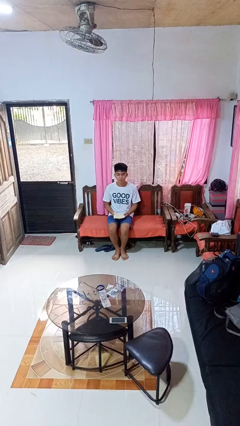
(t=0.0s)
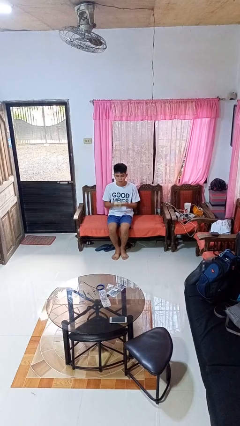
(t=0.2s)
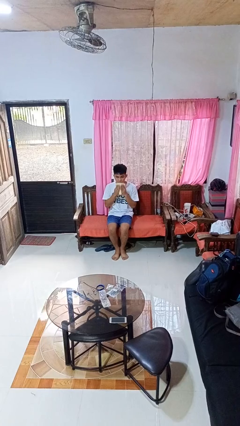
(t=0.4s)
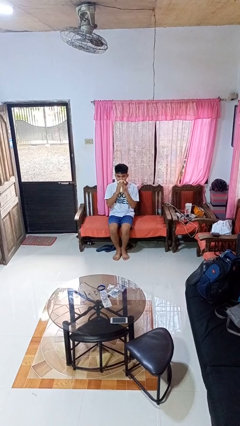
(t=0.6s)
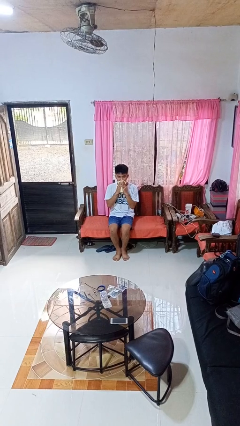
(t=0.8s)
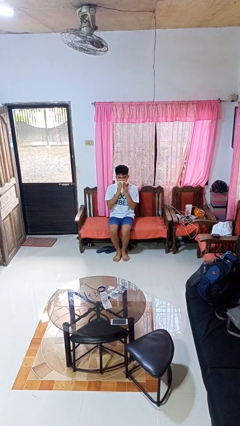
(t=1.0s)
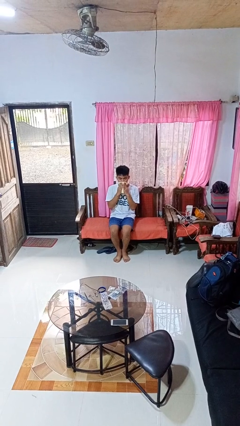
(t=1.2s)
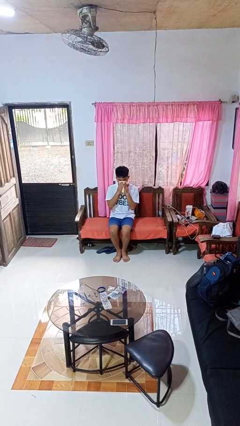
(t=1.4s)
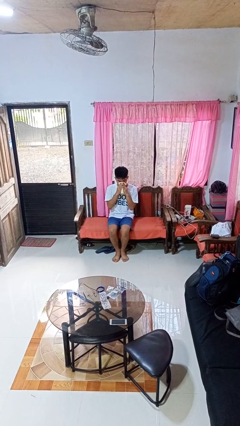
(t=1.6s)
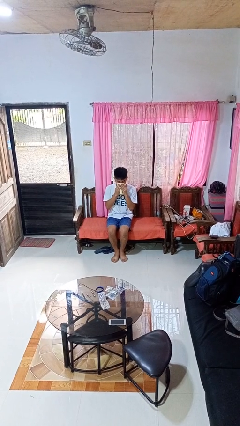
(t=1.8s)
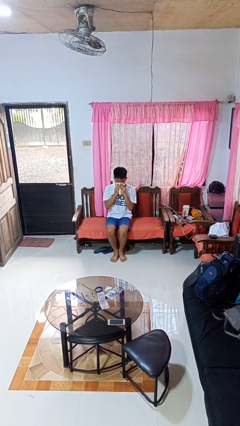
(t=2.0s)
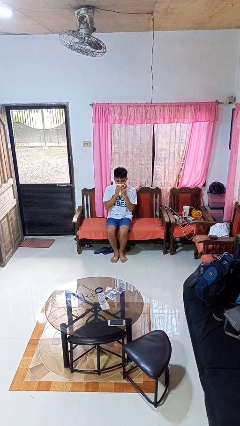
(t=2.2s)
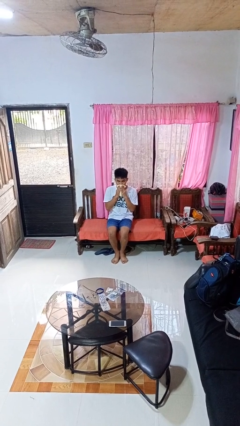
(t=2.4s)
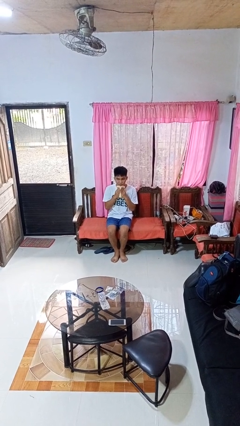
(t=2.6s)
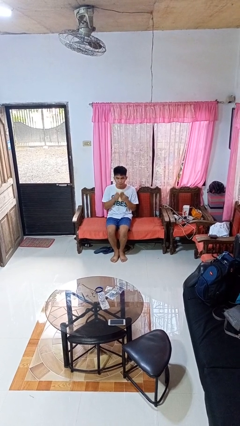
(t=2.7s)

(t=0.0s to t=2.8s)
person wipes mouth with napkin

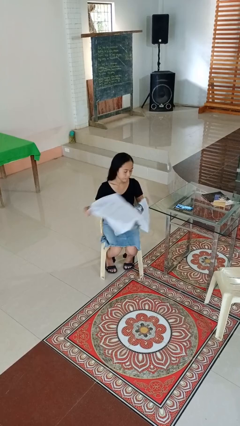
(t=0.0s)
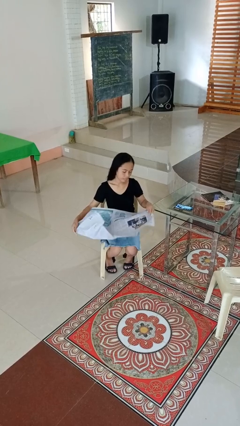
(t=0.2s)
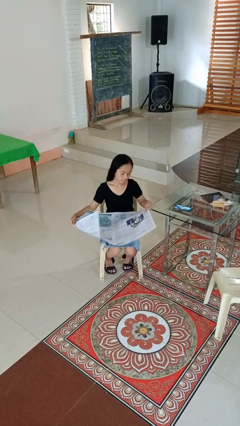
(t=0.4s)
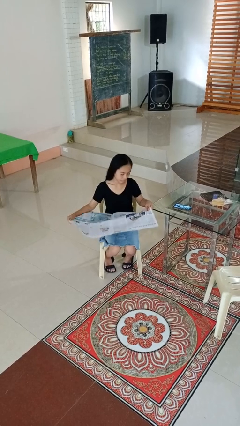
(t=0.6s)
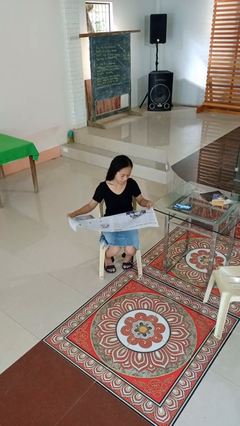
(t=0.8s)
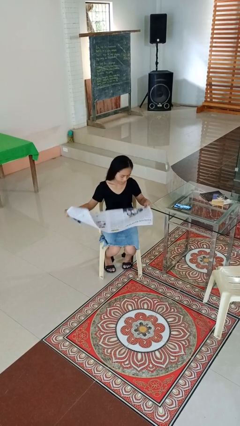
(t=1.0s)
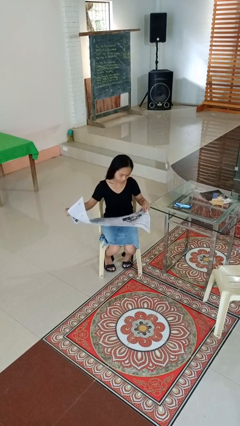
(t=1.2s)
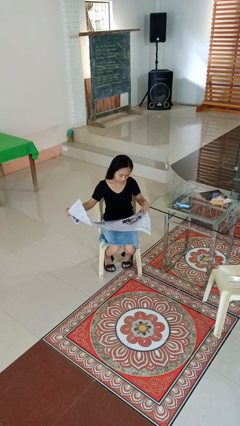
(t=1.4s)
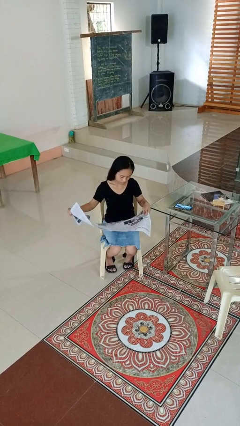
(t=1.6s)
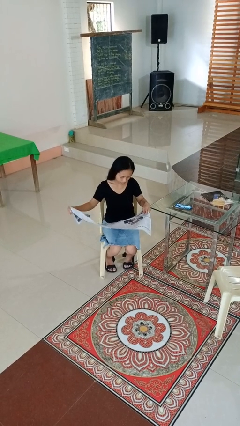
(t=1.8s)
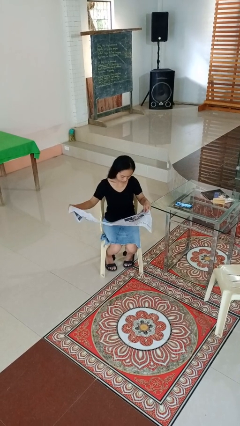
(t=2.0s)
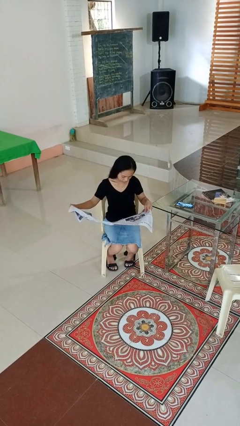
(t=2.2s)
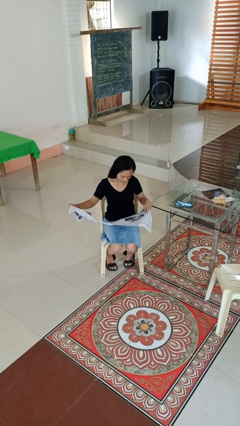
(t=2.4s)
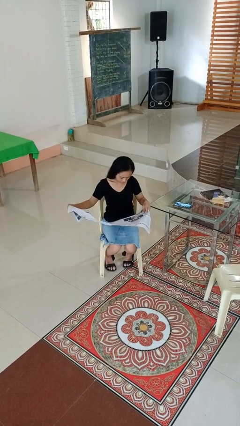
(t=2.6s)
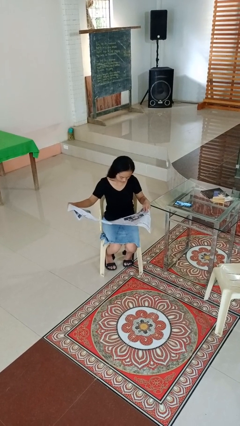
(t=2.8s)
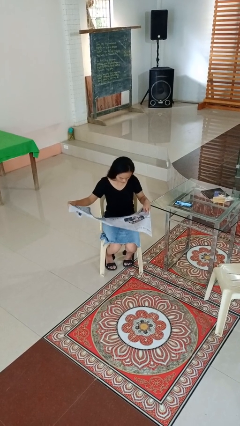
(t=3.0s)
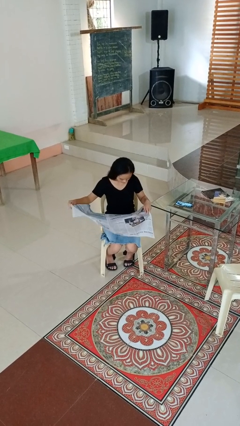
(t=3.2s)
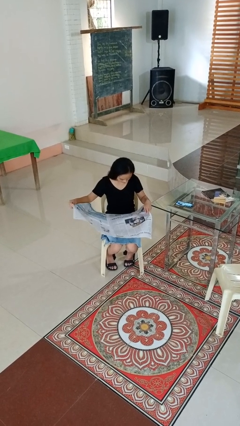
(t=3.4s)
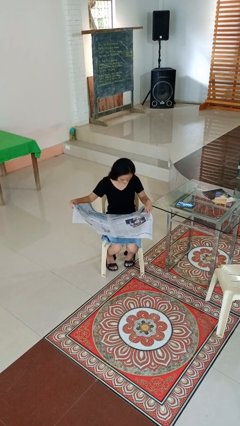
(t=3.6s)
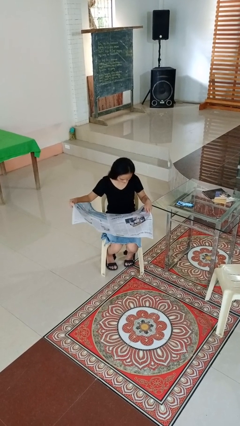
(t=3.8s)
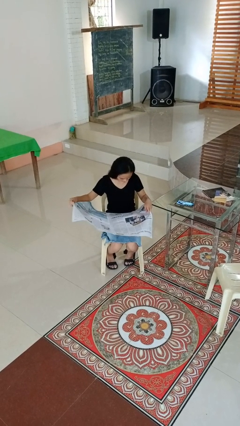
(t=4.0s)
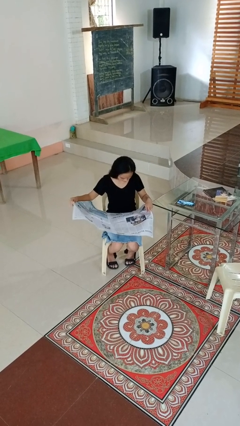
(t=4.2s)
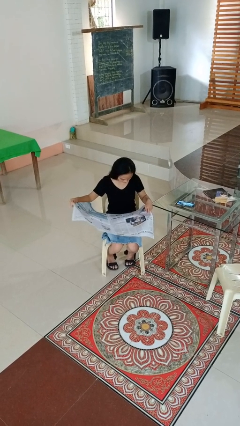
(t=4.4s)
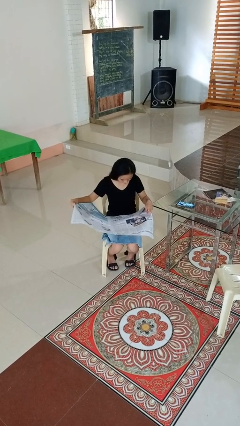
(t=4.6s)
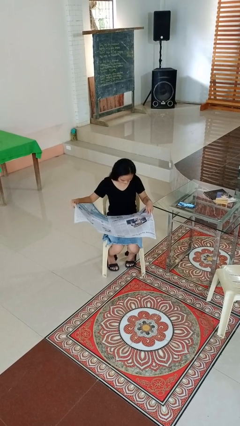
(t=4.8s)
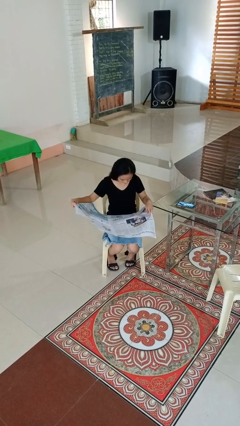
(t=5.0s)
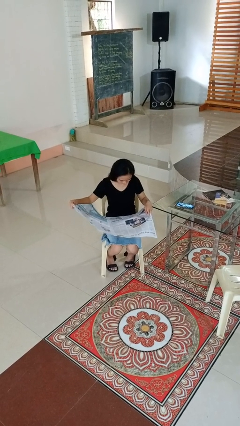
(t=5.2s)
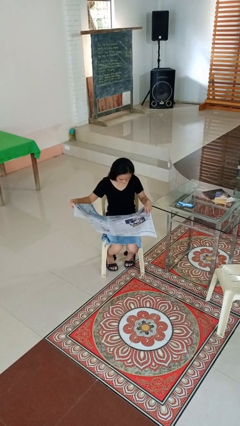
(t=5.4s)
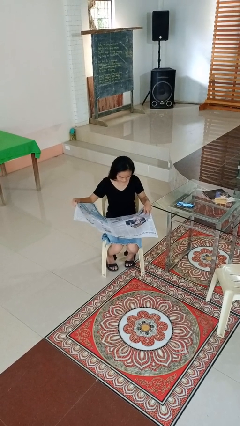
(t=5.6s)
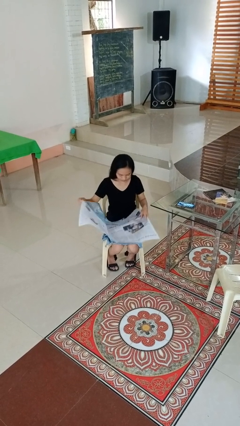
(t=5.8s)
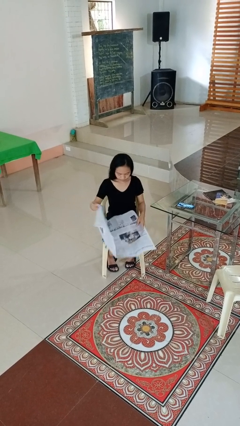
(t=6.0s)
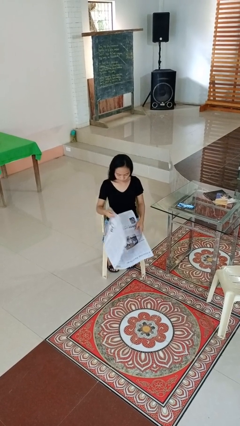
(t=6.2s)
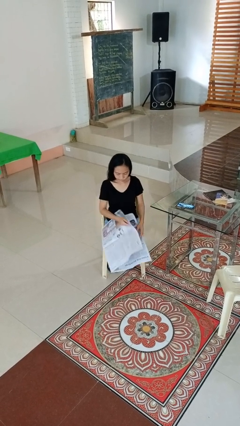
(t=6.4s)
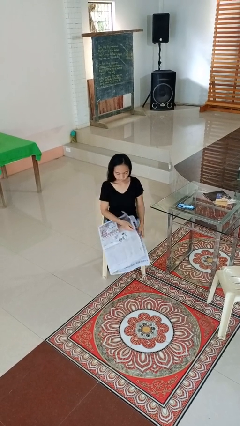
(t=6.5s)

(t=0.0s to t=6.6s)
person reads newspaper

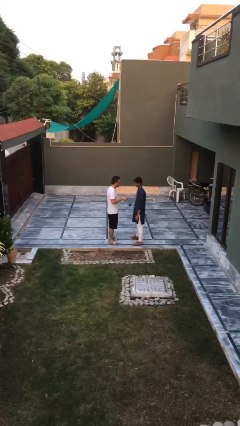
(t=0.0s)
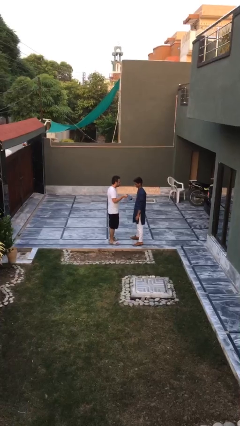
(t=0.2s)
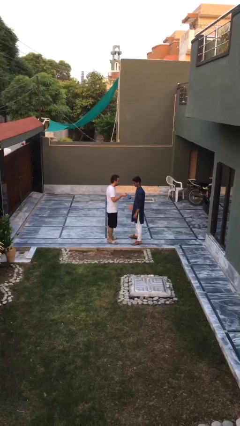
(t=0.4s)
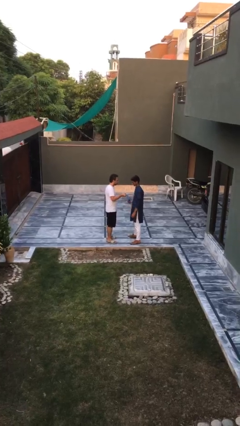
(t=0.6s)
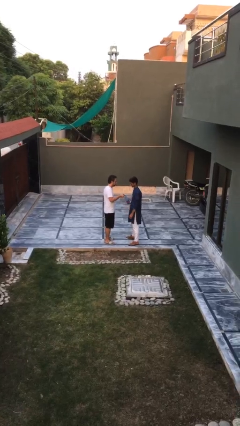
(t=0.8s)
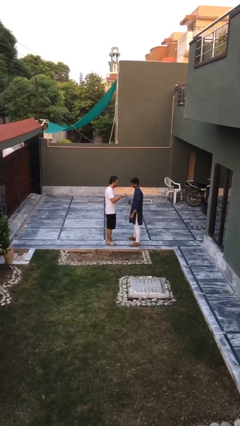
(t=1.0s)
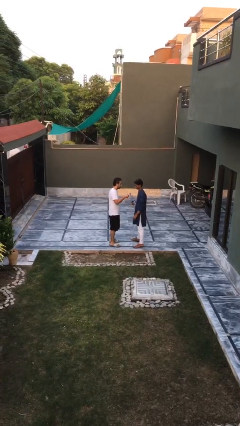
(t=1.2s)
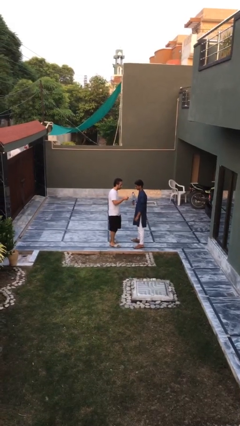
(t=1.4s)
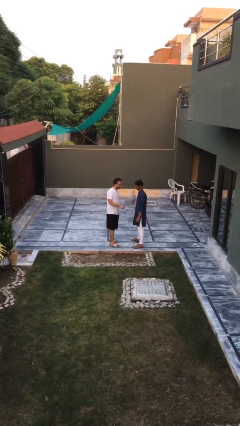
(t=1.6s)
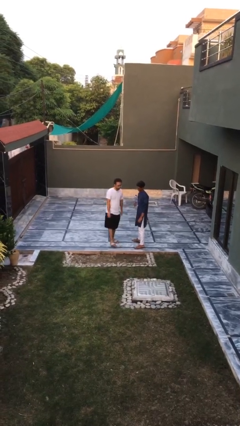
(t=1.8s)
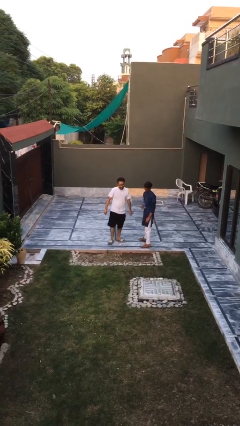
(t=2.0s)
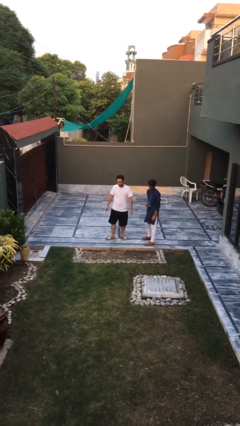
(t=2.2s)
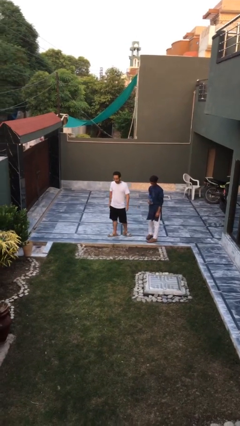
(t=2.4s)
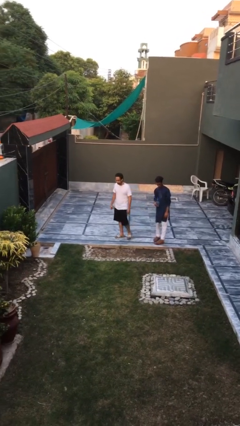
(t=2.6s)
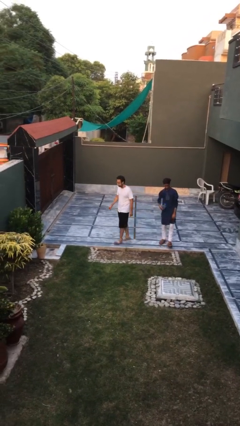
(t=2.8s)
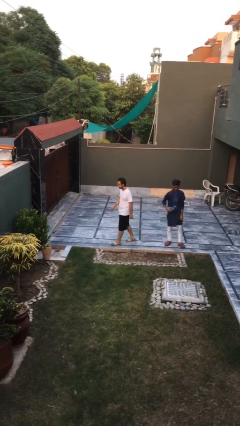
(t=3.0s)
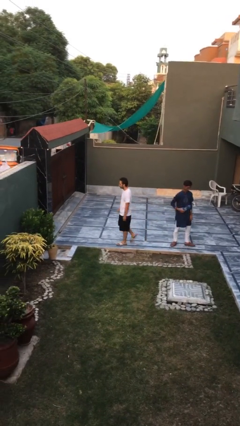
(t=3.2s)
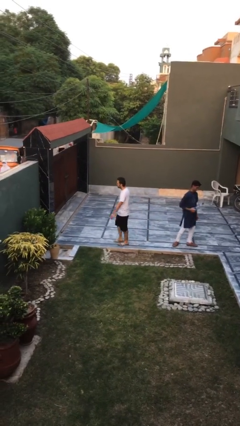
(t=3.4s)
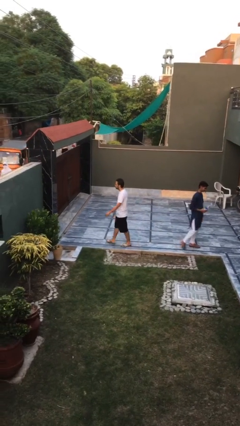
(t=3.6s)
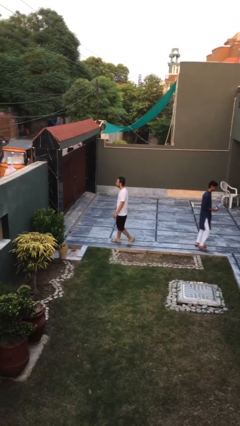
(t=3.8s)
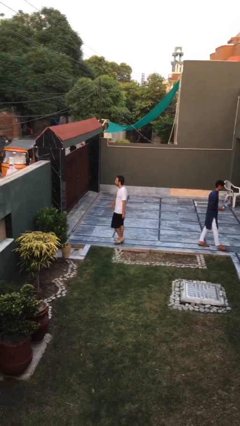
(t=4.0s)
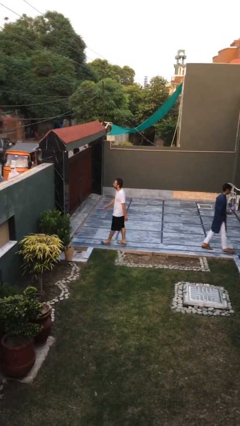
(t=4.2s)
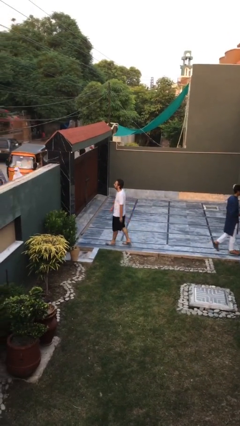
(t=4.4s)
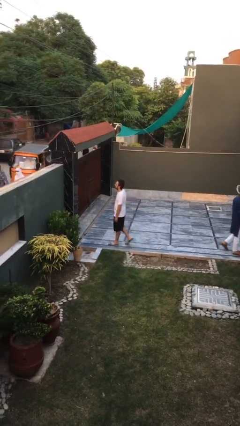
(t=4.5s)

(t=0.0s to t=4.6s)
person transfers object to person

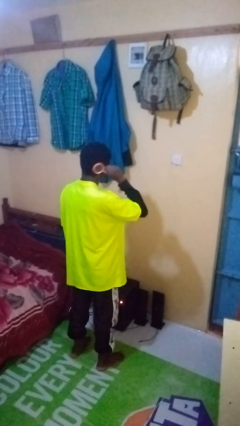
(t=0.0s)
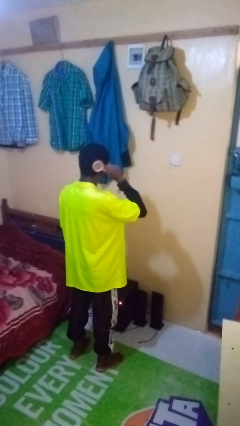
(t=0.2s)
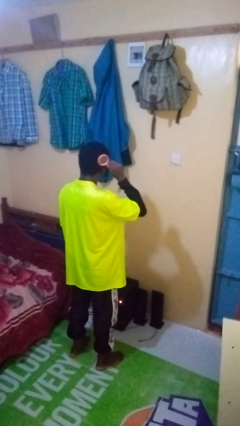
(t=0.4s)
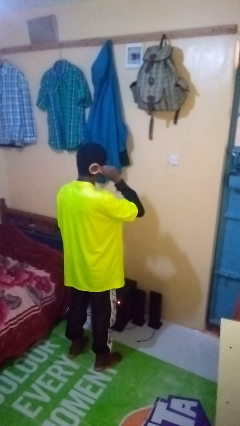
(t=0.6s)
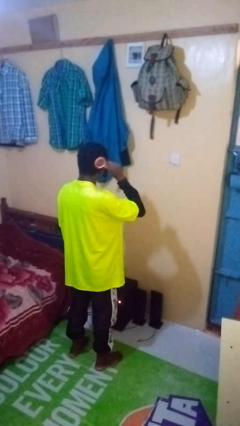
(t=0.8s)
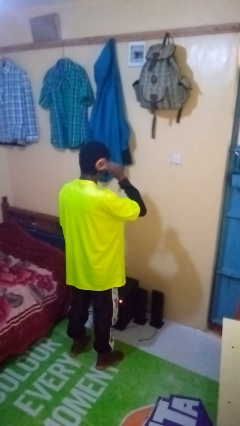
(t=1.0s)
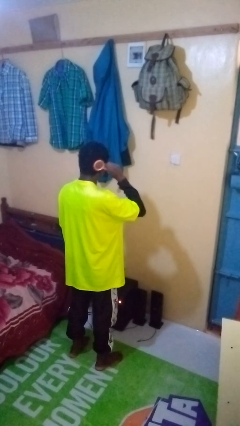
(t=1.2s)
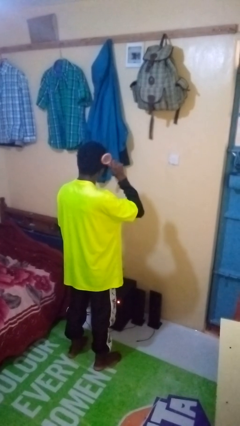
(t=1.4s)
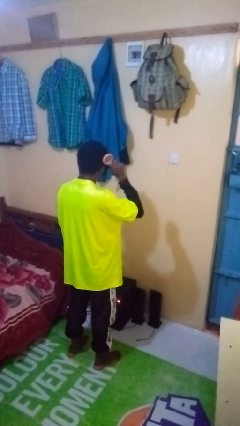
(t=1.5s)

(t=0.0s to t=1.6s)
person brushes hair

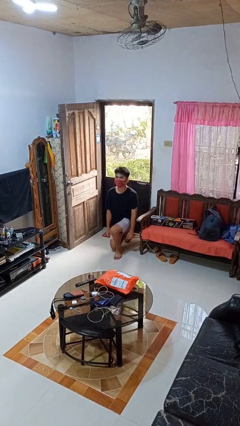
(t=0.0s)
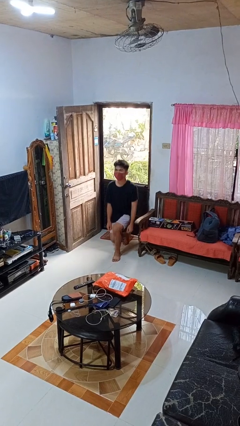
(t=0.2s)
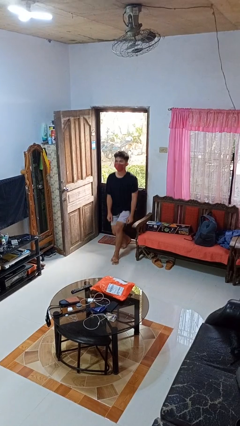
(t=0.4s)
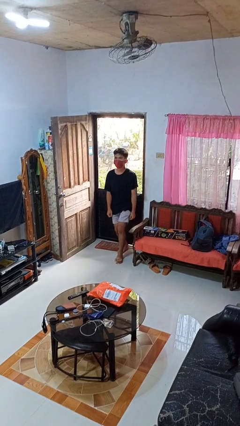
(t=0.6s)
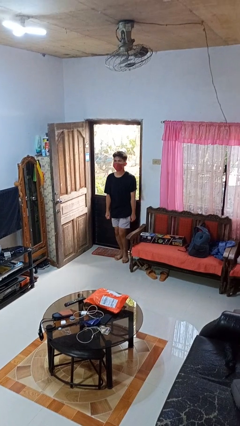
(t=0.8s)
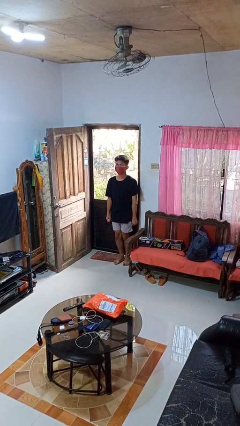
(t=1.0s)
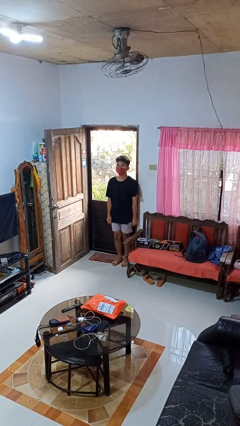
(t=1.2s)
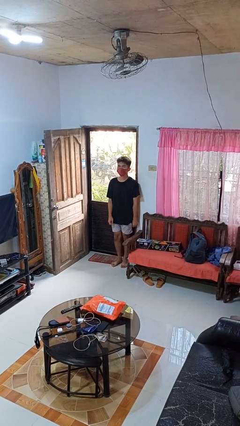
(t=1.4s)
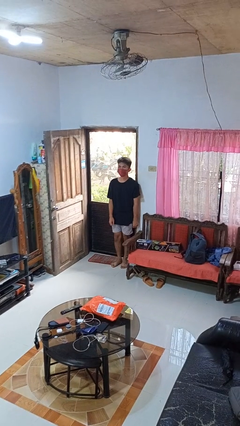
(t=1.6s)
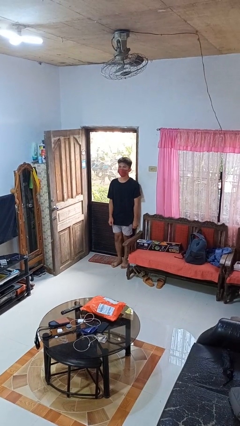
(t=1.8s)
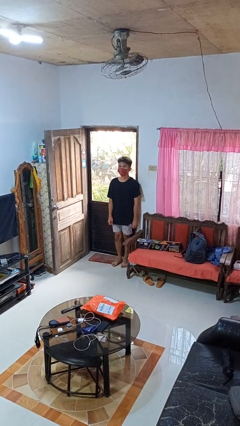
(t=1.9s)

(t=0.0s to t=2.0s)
person stands up from floor
